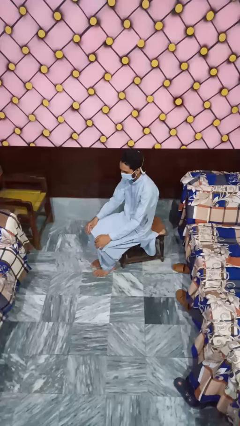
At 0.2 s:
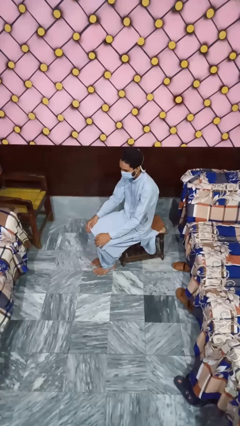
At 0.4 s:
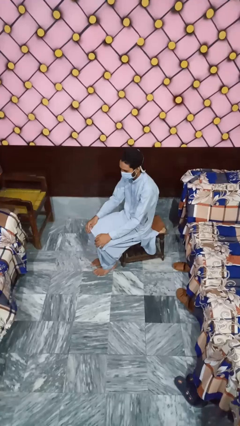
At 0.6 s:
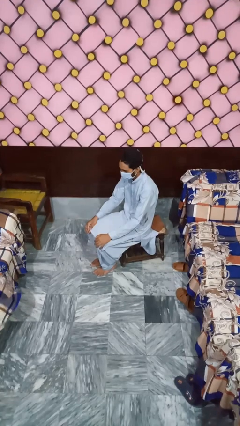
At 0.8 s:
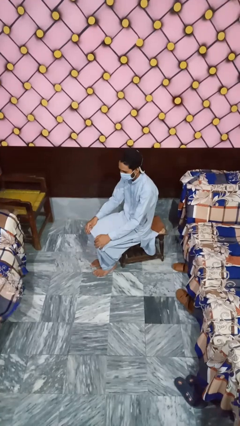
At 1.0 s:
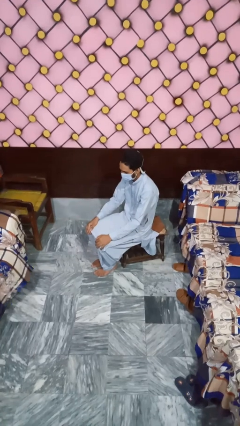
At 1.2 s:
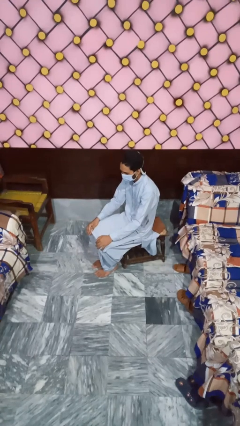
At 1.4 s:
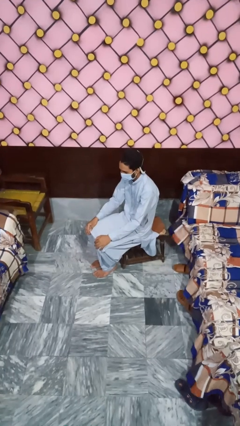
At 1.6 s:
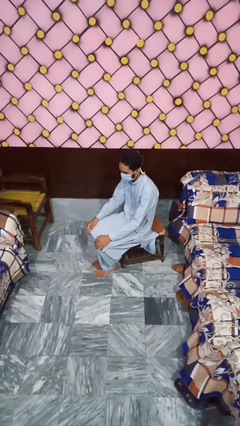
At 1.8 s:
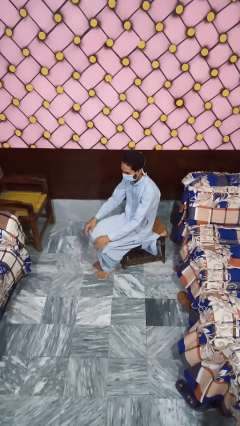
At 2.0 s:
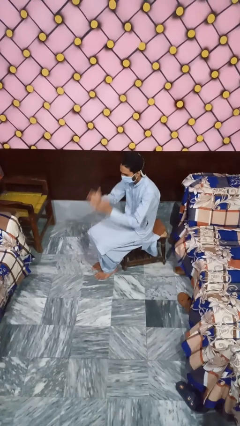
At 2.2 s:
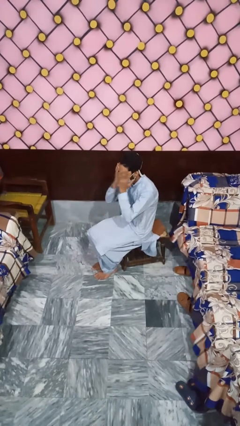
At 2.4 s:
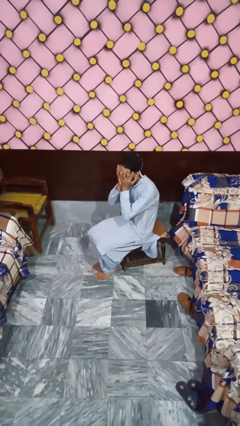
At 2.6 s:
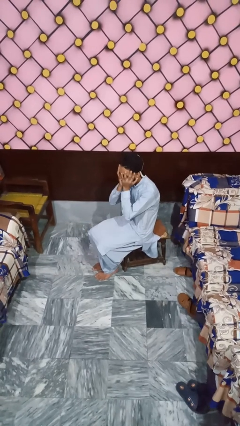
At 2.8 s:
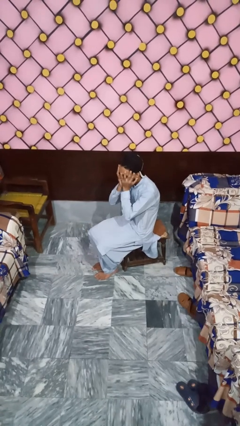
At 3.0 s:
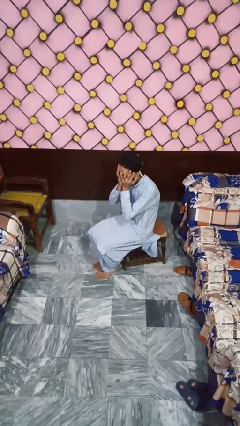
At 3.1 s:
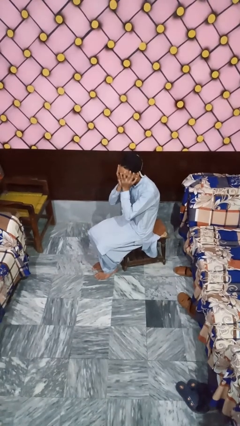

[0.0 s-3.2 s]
person covers face with hands

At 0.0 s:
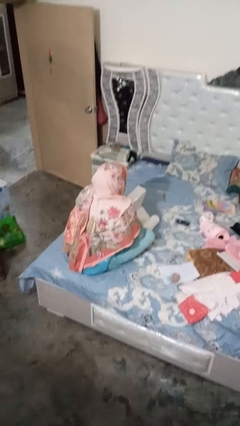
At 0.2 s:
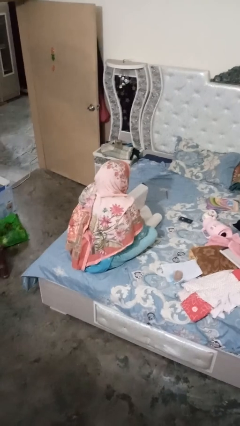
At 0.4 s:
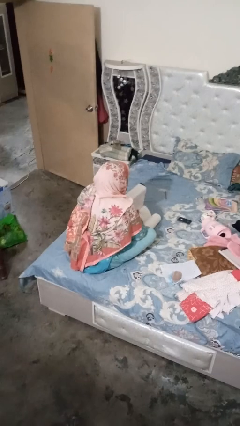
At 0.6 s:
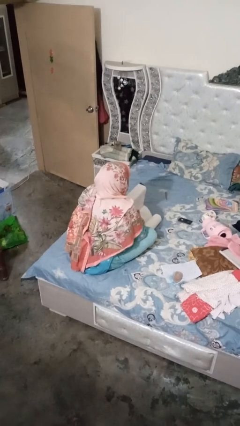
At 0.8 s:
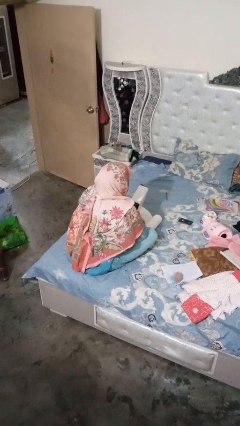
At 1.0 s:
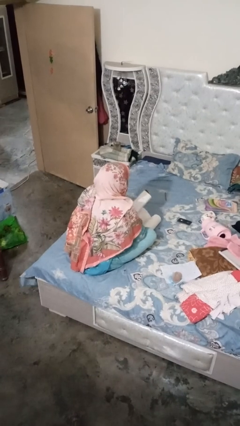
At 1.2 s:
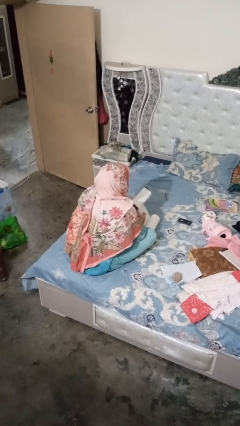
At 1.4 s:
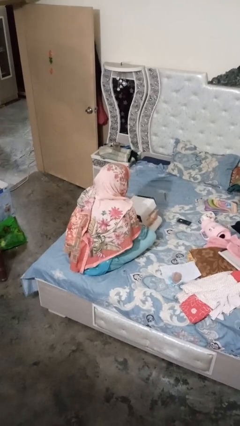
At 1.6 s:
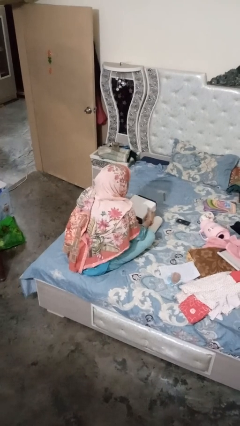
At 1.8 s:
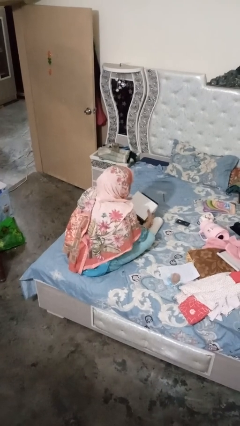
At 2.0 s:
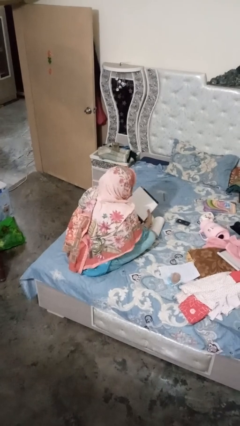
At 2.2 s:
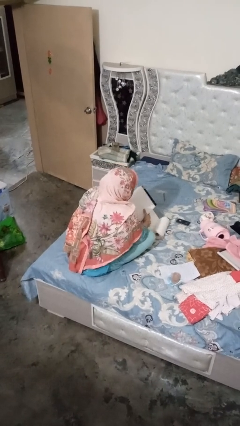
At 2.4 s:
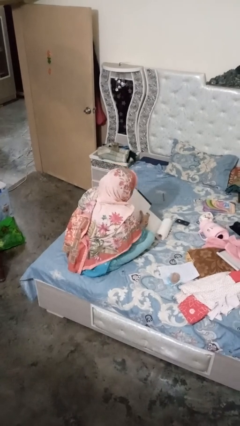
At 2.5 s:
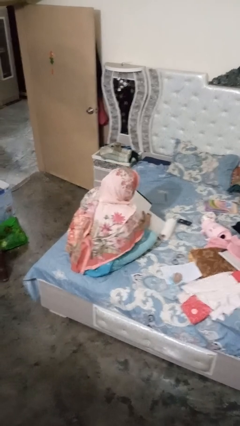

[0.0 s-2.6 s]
person wraps box

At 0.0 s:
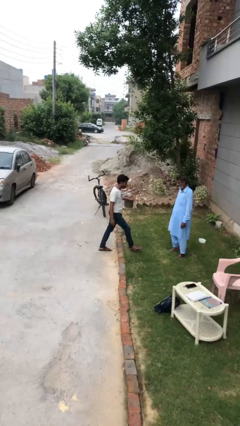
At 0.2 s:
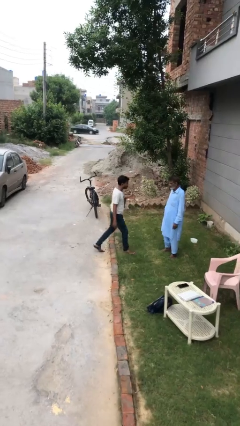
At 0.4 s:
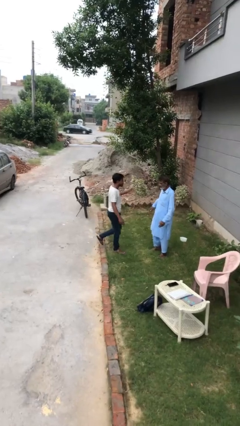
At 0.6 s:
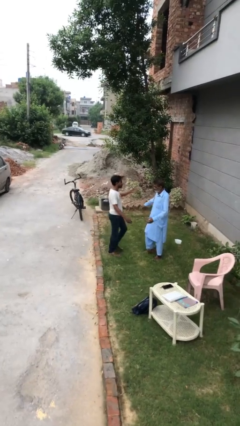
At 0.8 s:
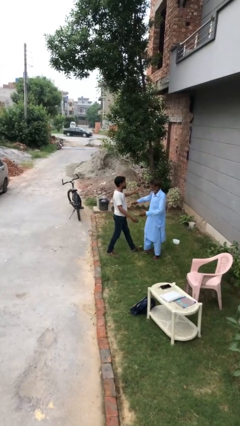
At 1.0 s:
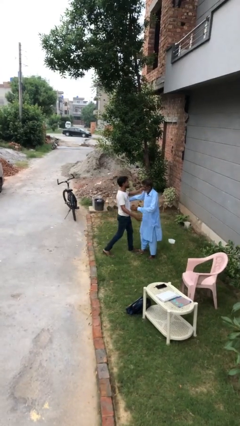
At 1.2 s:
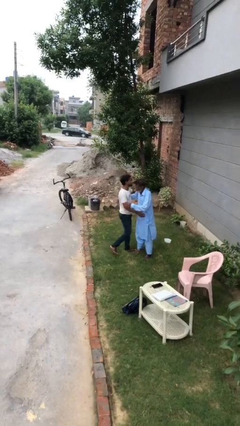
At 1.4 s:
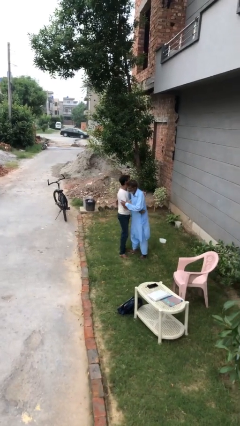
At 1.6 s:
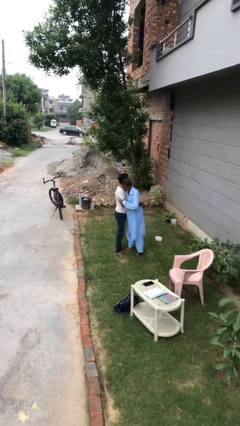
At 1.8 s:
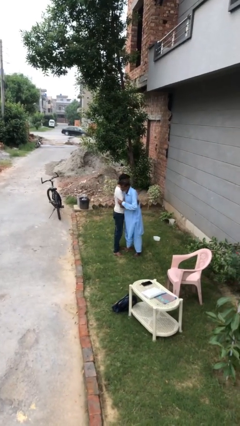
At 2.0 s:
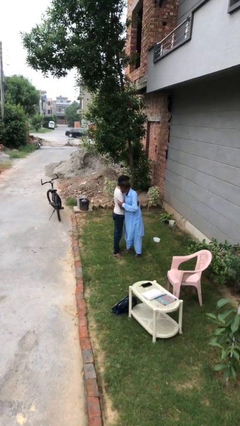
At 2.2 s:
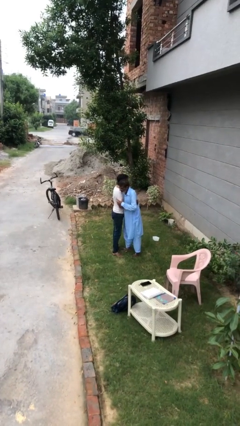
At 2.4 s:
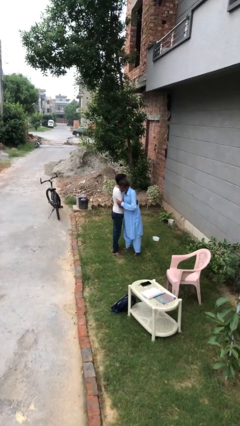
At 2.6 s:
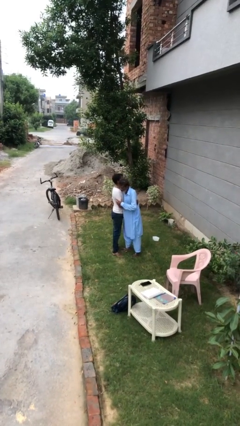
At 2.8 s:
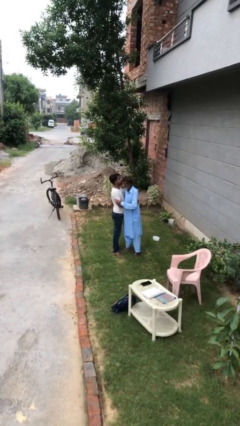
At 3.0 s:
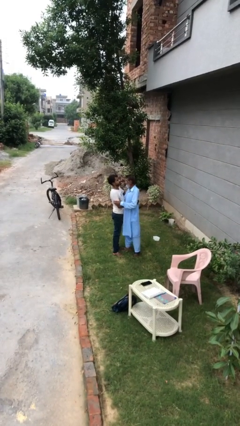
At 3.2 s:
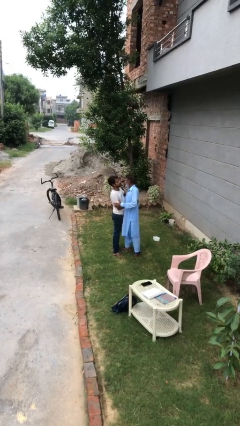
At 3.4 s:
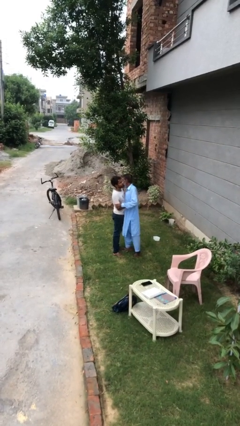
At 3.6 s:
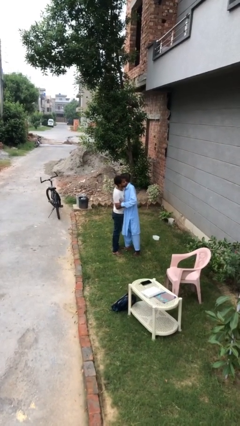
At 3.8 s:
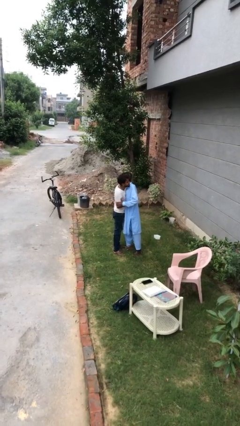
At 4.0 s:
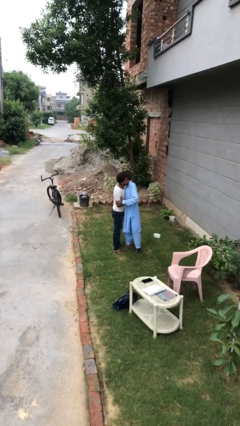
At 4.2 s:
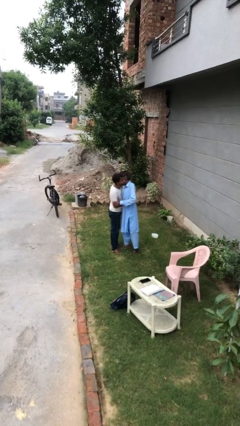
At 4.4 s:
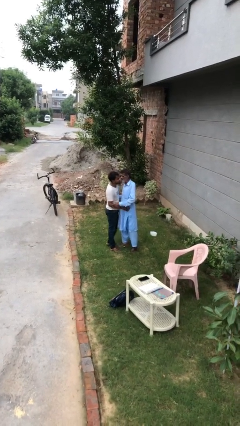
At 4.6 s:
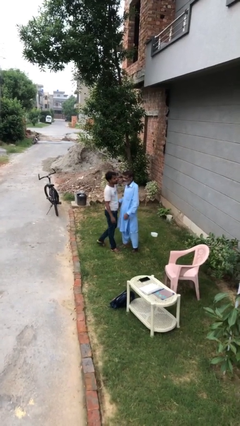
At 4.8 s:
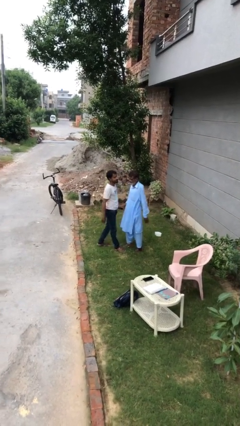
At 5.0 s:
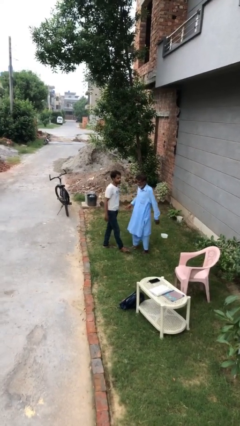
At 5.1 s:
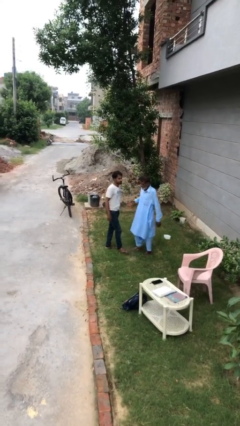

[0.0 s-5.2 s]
person embraces person

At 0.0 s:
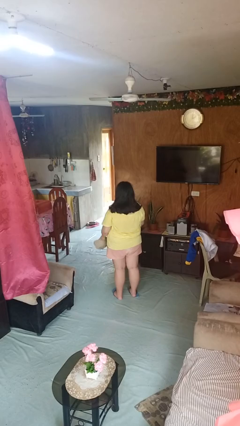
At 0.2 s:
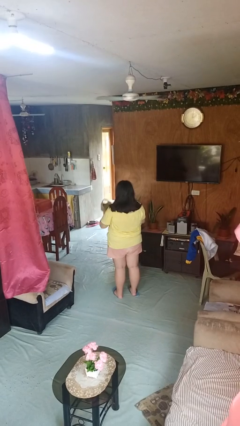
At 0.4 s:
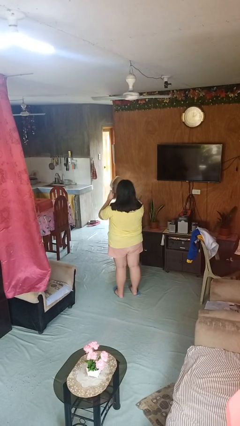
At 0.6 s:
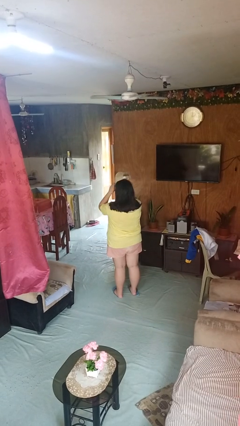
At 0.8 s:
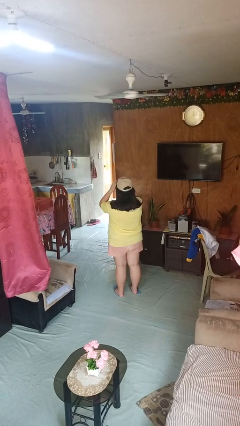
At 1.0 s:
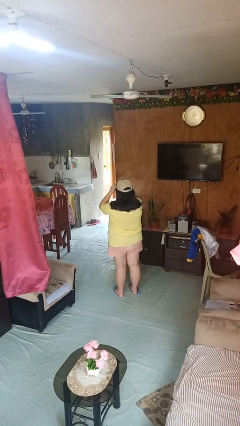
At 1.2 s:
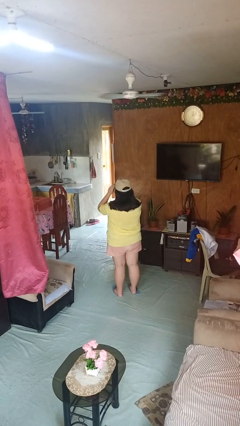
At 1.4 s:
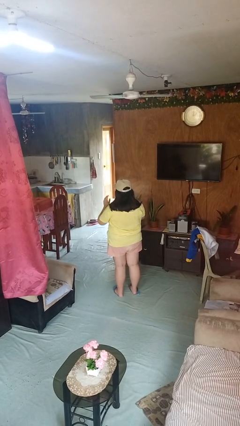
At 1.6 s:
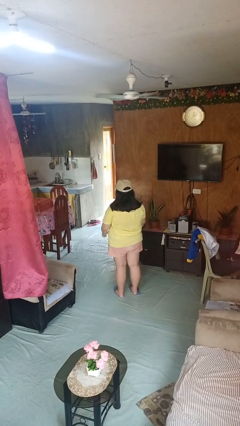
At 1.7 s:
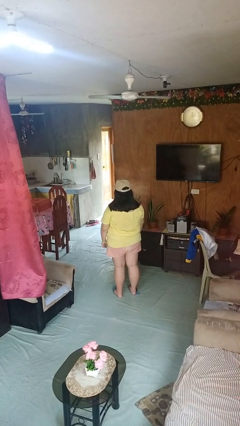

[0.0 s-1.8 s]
person puts on hat

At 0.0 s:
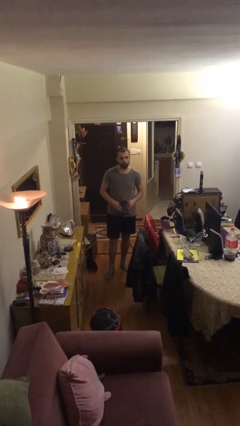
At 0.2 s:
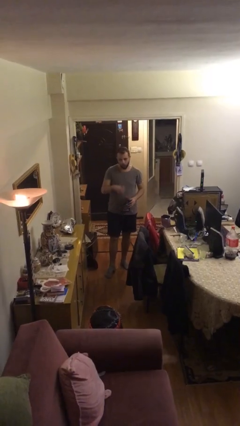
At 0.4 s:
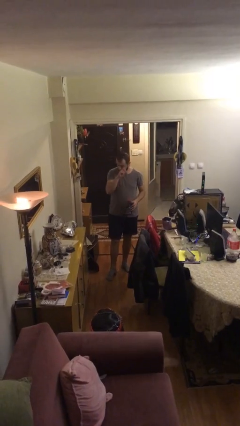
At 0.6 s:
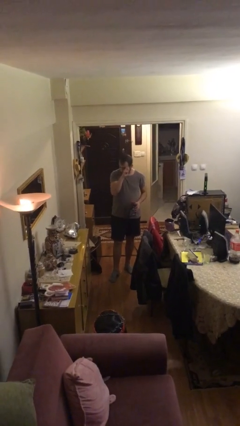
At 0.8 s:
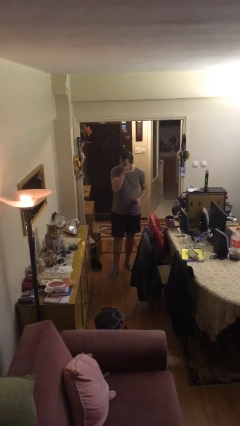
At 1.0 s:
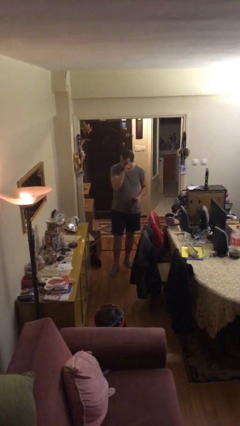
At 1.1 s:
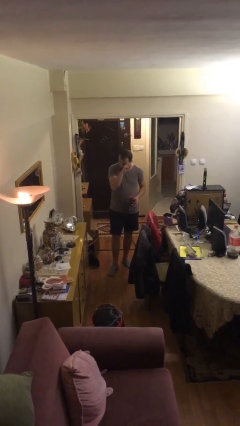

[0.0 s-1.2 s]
person puts down object on table

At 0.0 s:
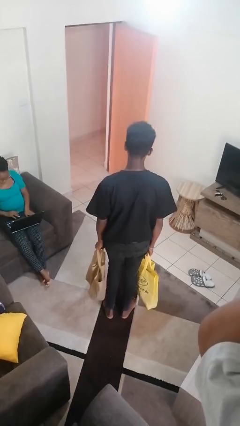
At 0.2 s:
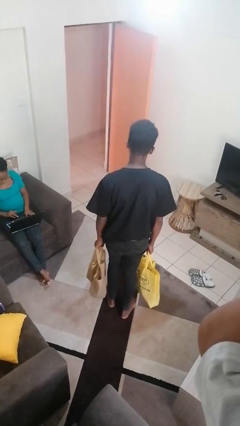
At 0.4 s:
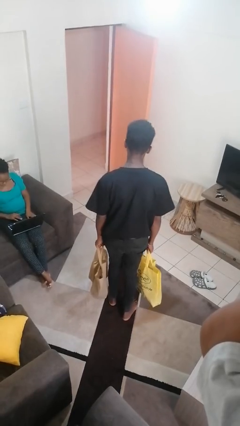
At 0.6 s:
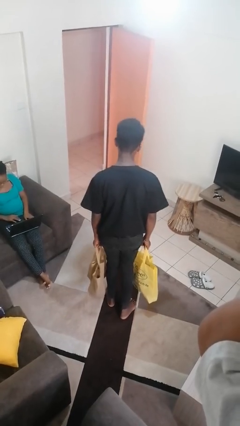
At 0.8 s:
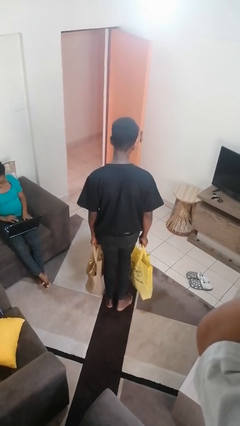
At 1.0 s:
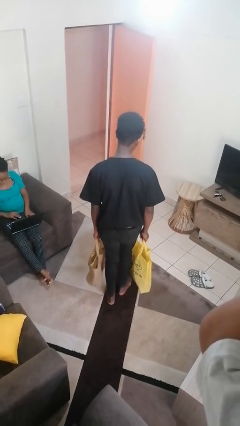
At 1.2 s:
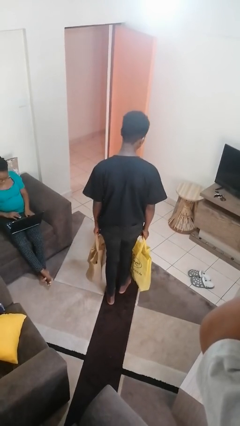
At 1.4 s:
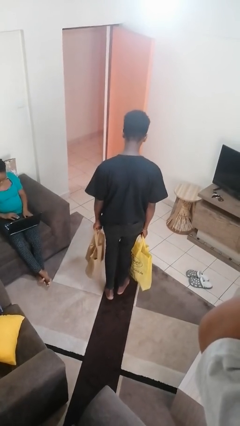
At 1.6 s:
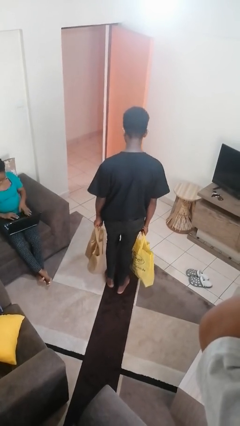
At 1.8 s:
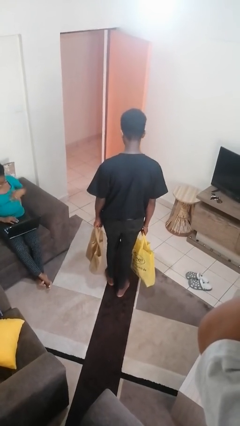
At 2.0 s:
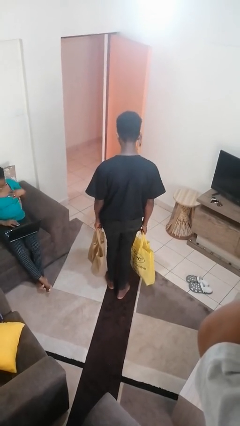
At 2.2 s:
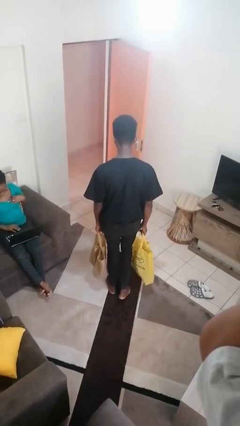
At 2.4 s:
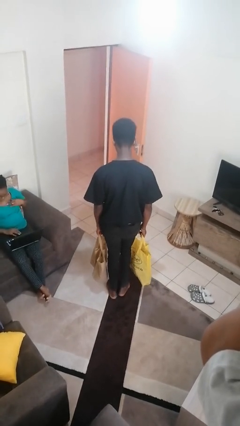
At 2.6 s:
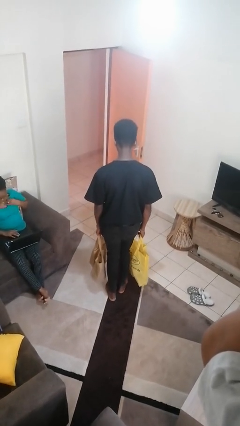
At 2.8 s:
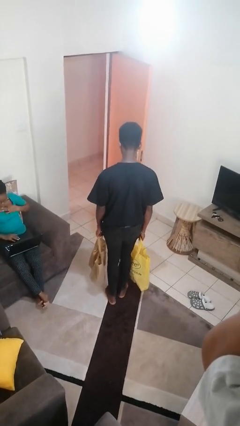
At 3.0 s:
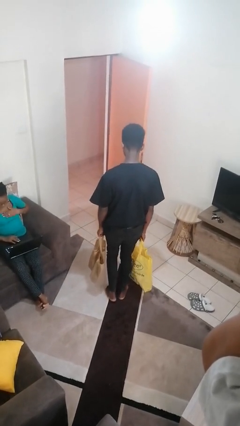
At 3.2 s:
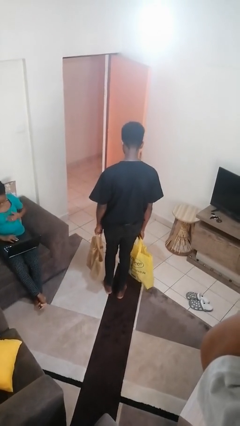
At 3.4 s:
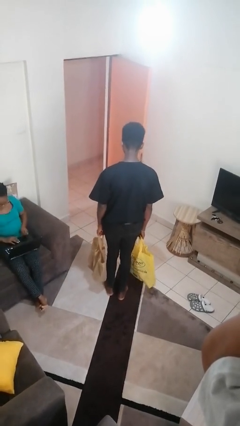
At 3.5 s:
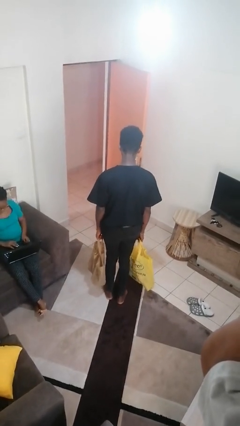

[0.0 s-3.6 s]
person carries groceries
